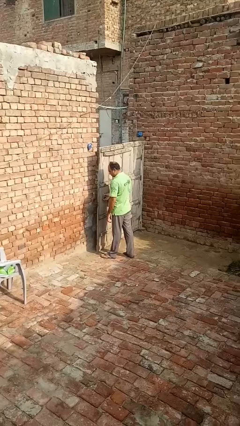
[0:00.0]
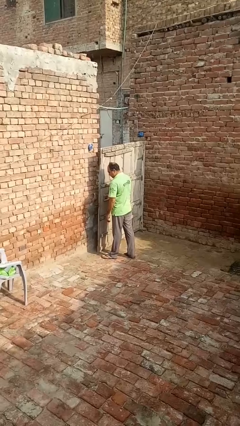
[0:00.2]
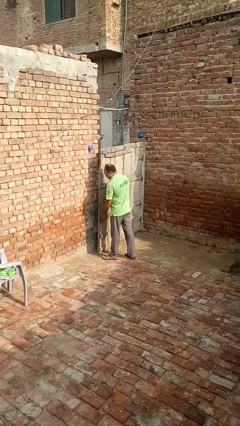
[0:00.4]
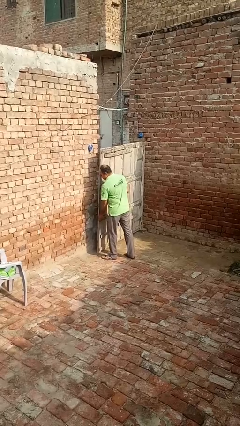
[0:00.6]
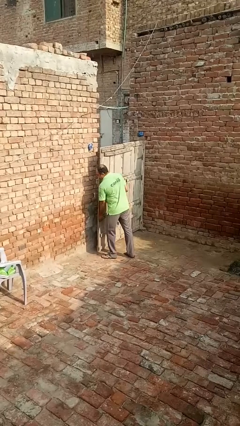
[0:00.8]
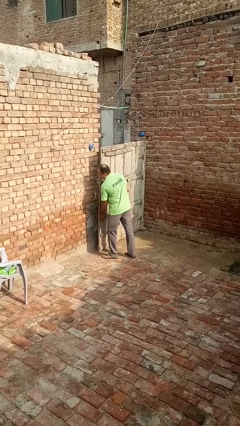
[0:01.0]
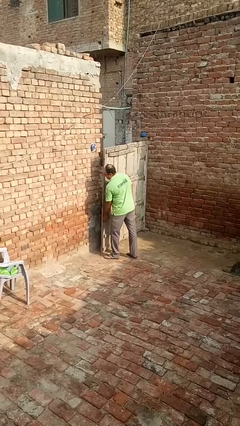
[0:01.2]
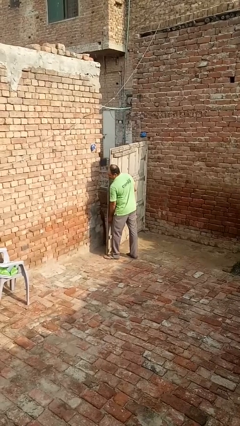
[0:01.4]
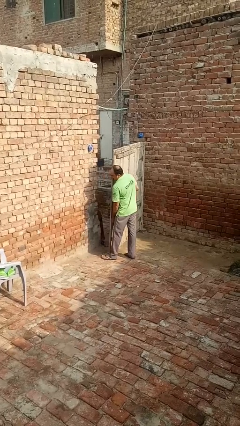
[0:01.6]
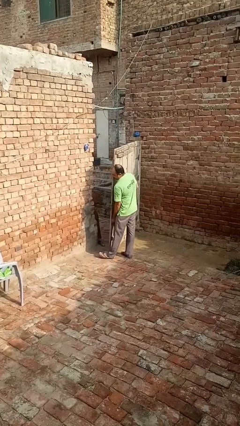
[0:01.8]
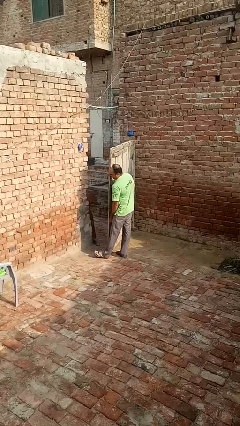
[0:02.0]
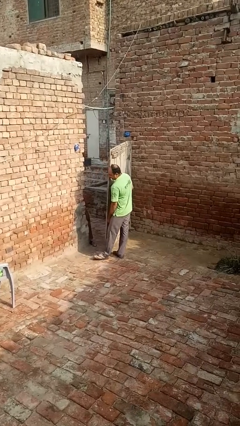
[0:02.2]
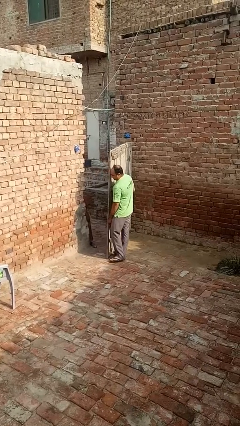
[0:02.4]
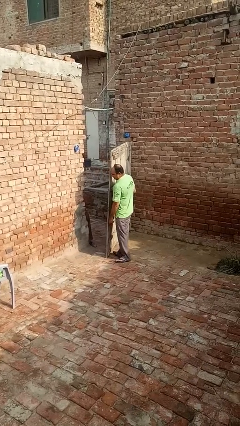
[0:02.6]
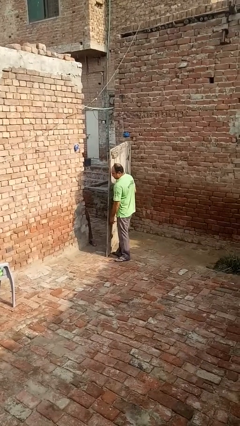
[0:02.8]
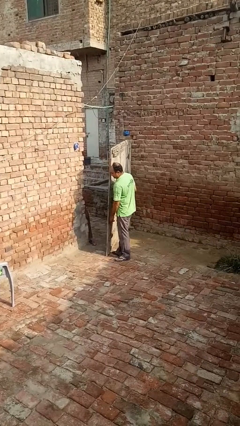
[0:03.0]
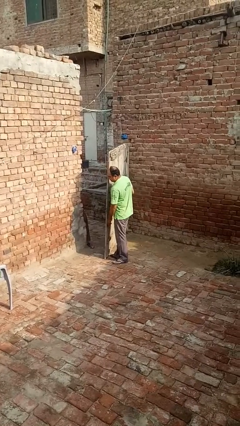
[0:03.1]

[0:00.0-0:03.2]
person opens gate

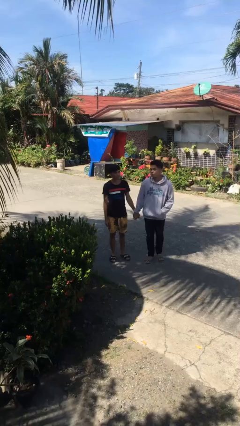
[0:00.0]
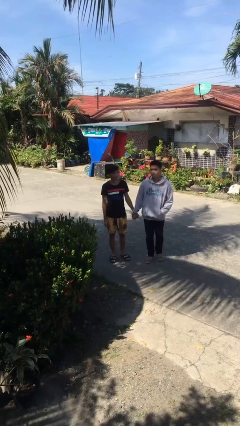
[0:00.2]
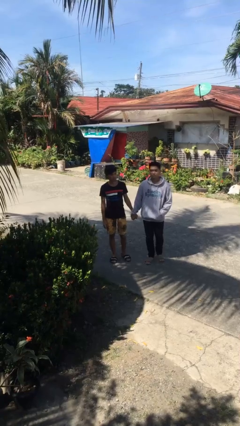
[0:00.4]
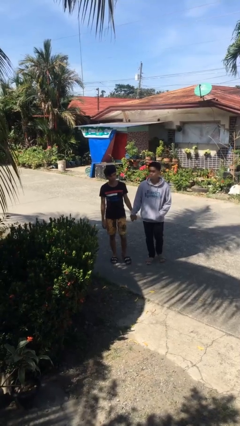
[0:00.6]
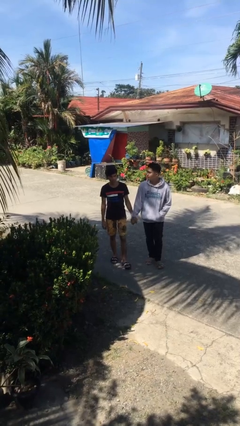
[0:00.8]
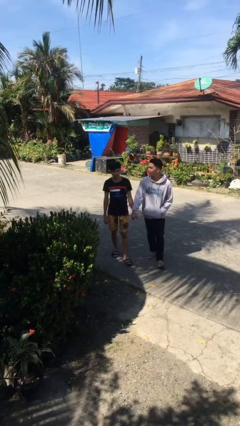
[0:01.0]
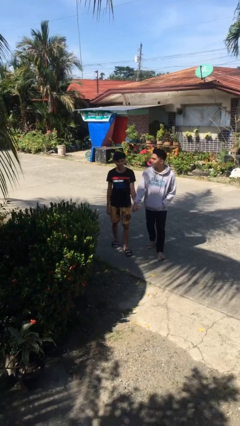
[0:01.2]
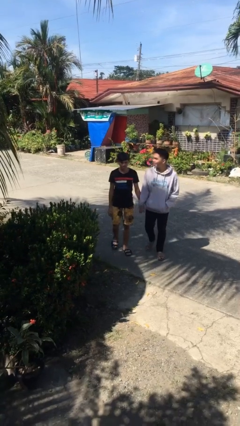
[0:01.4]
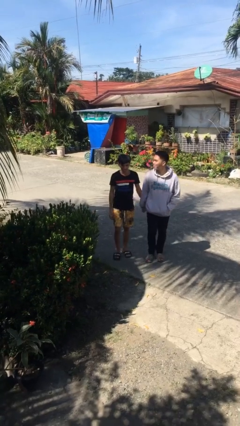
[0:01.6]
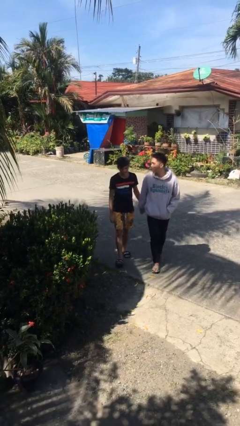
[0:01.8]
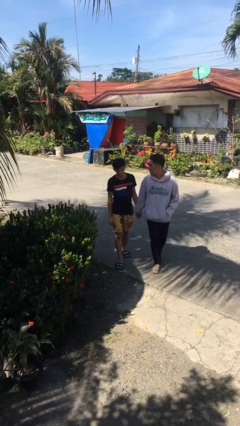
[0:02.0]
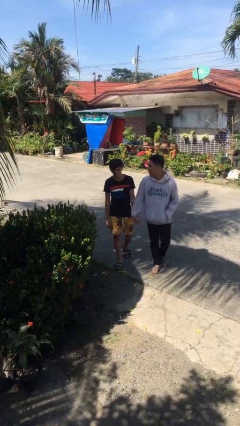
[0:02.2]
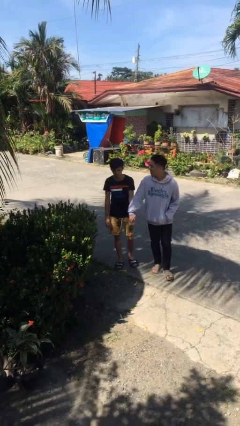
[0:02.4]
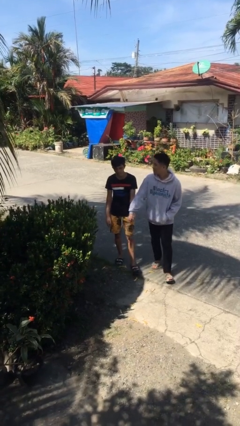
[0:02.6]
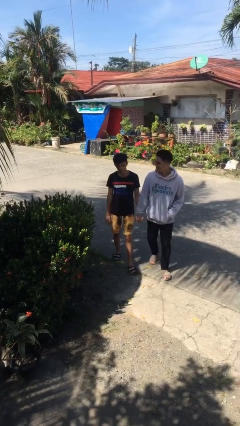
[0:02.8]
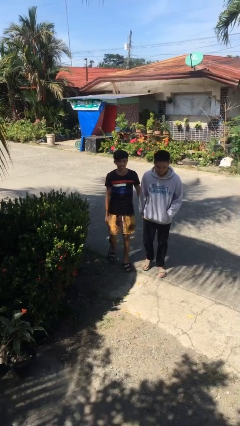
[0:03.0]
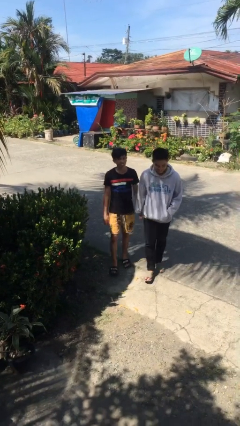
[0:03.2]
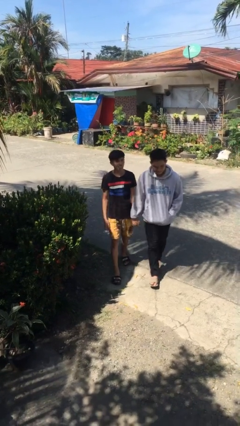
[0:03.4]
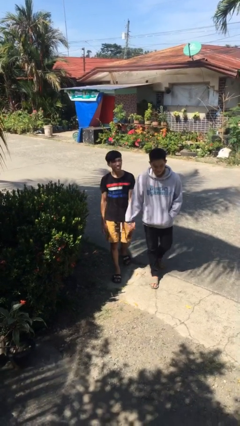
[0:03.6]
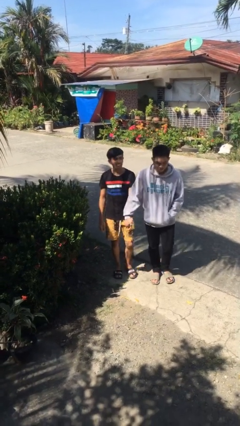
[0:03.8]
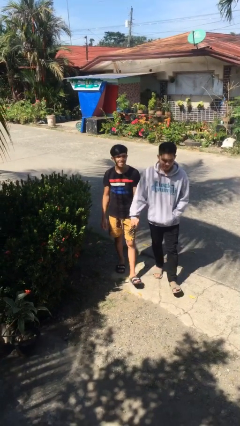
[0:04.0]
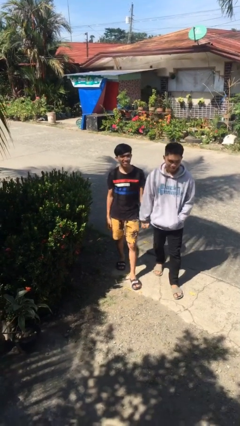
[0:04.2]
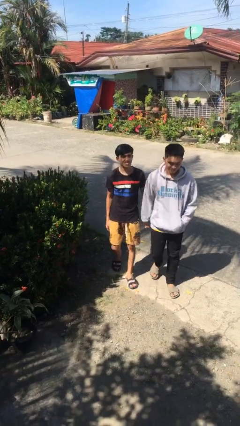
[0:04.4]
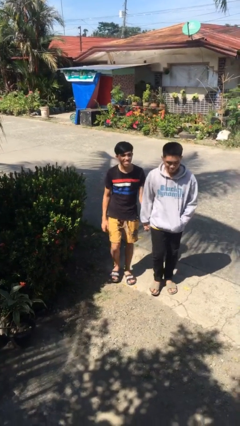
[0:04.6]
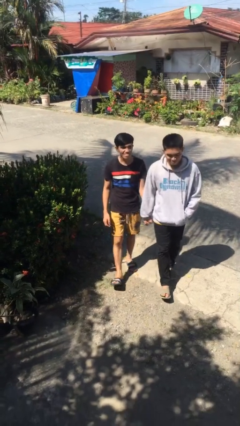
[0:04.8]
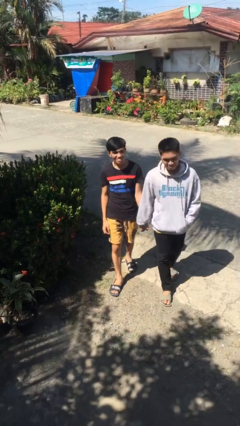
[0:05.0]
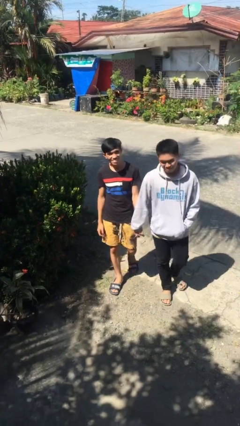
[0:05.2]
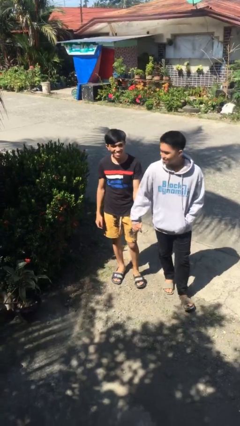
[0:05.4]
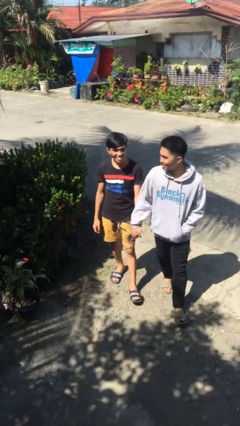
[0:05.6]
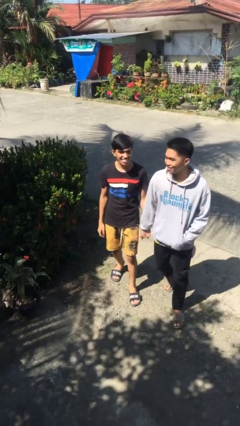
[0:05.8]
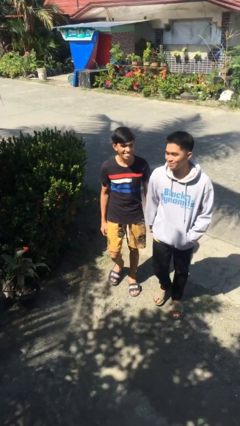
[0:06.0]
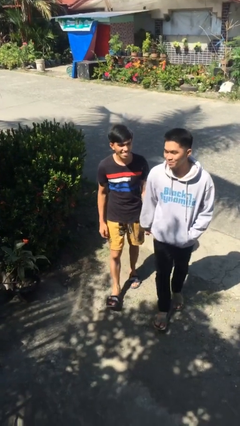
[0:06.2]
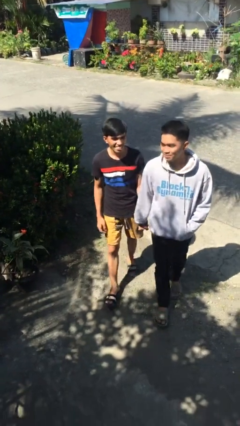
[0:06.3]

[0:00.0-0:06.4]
person holds hand

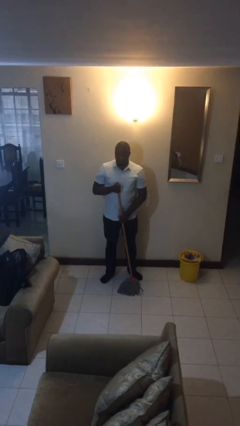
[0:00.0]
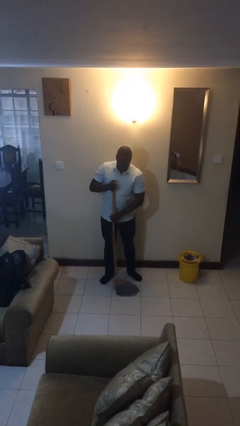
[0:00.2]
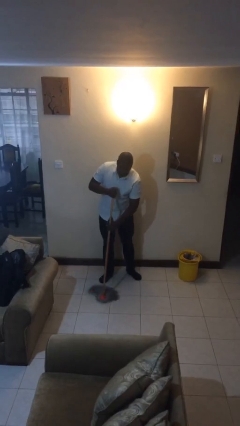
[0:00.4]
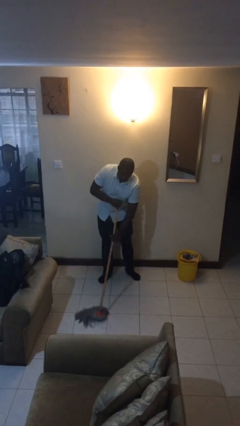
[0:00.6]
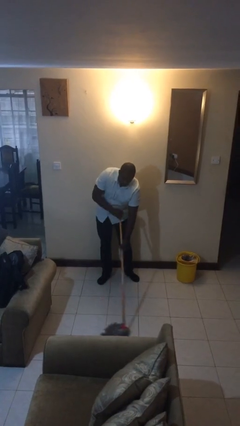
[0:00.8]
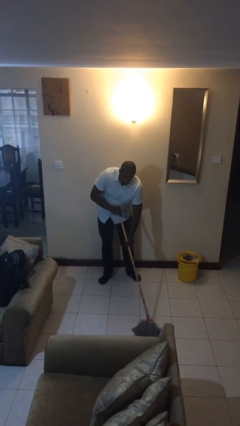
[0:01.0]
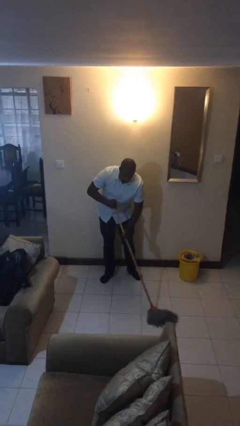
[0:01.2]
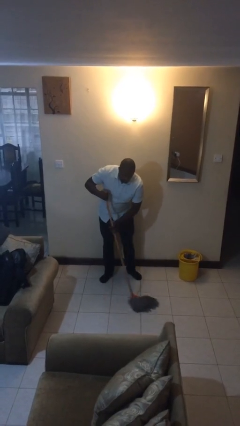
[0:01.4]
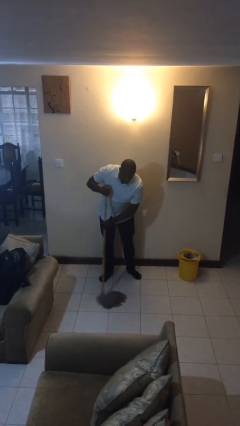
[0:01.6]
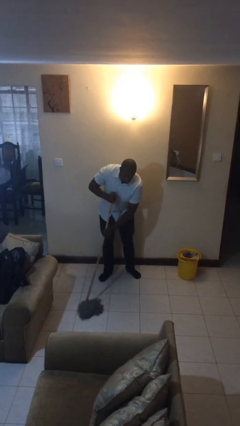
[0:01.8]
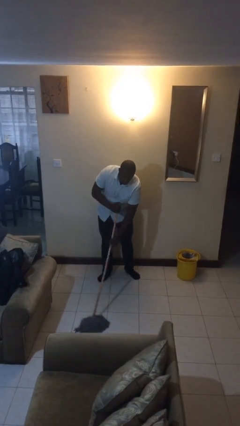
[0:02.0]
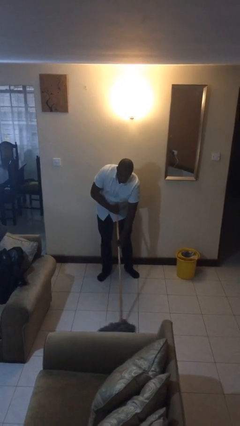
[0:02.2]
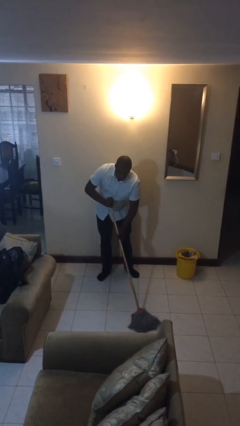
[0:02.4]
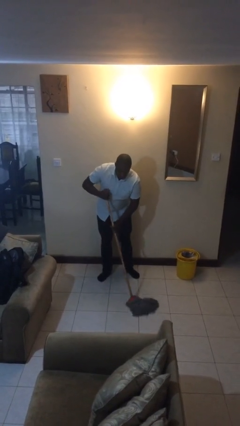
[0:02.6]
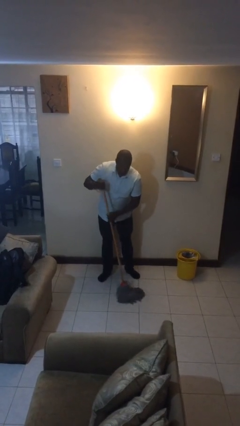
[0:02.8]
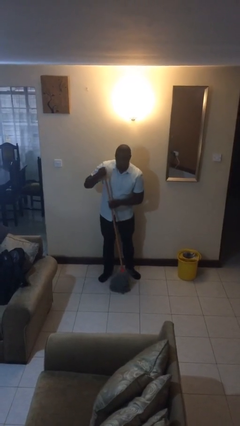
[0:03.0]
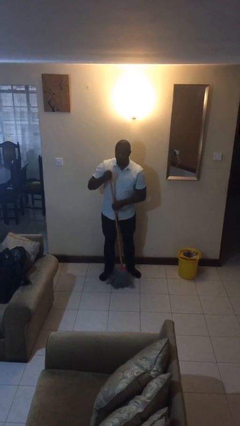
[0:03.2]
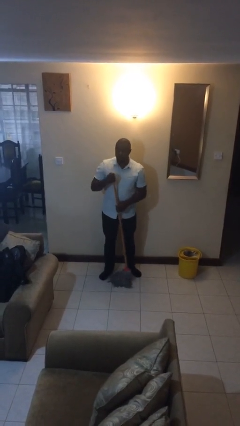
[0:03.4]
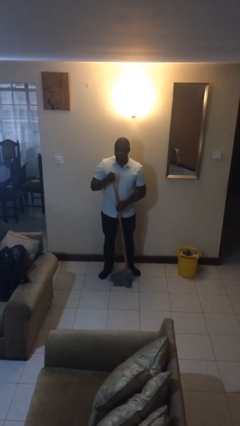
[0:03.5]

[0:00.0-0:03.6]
person mops

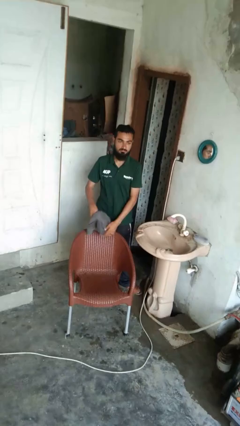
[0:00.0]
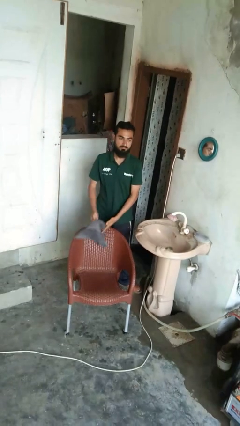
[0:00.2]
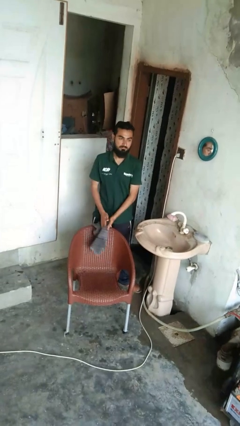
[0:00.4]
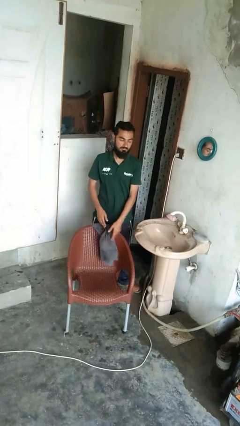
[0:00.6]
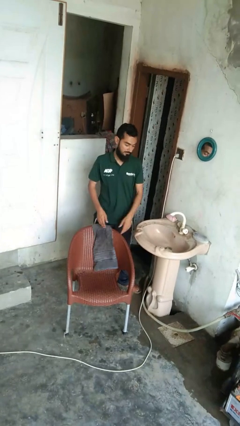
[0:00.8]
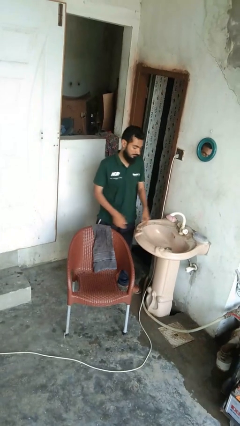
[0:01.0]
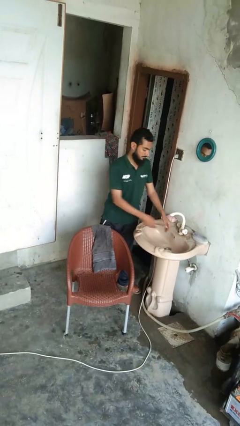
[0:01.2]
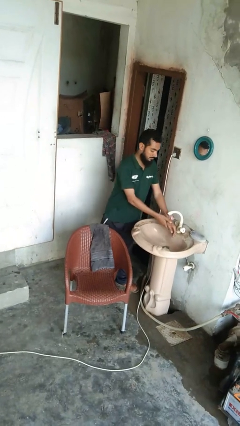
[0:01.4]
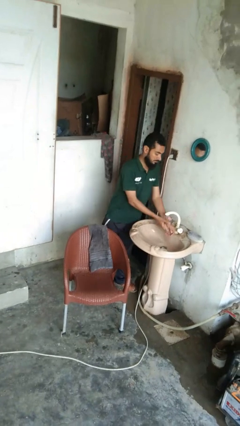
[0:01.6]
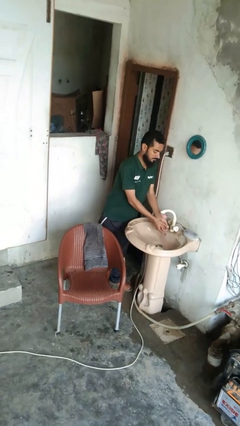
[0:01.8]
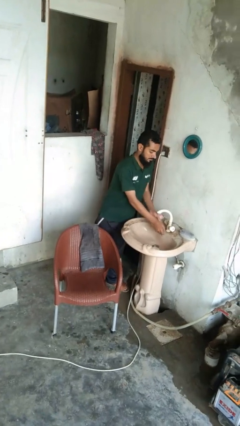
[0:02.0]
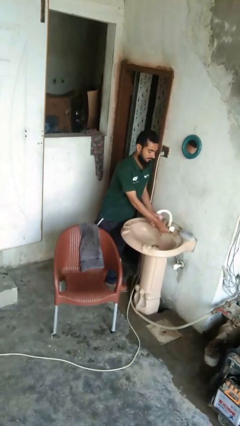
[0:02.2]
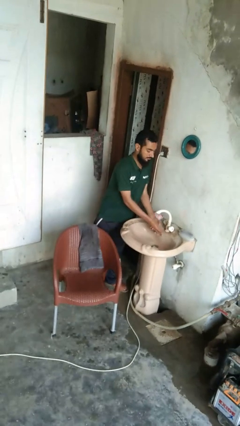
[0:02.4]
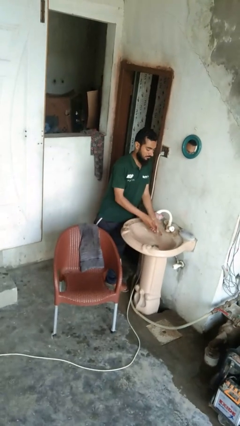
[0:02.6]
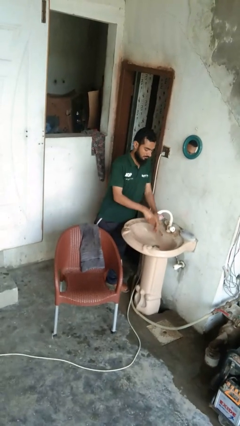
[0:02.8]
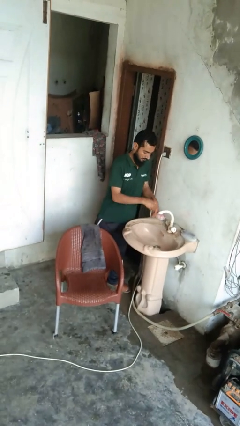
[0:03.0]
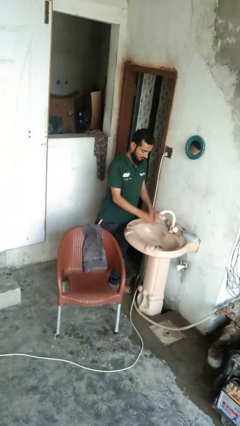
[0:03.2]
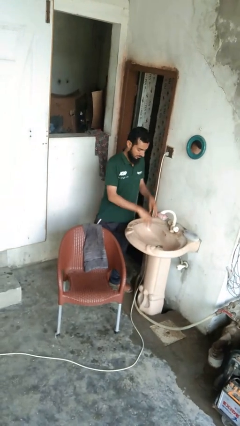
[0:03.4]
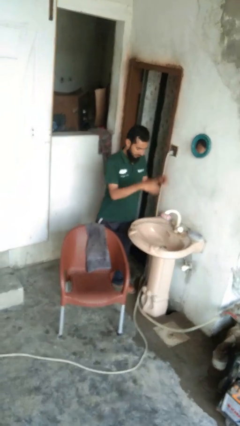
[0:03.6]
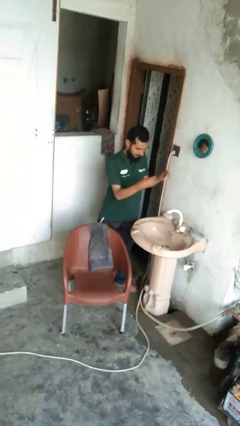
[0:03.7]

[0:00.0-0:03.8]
person washes hands

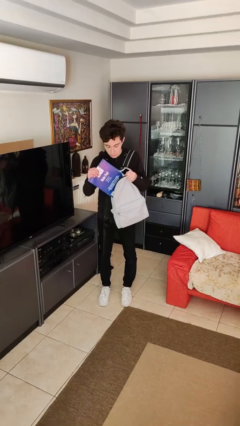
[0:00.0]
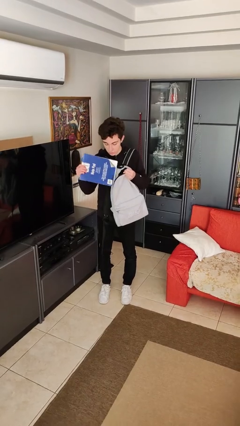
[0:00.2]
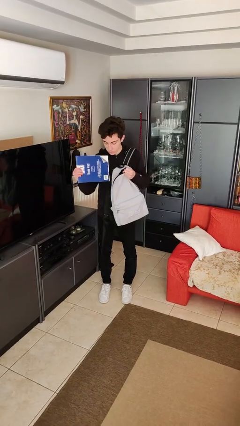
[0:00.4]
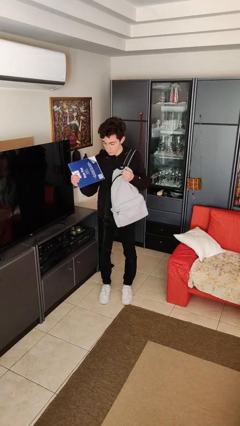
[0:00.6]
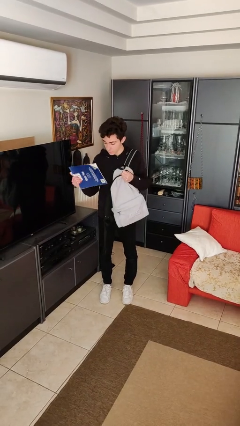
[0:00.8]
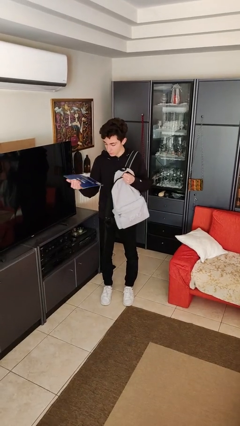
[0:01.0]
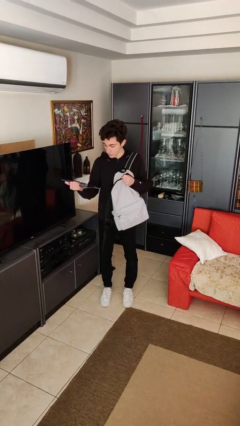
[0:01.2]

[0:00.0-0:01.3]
person takes object from backpack
